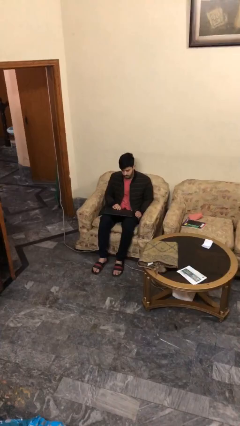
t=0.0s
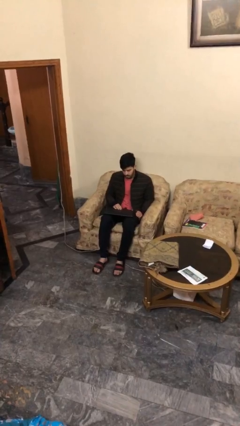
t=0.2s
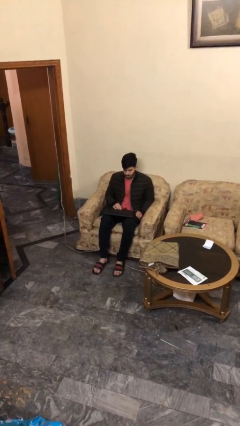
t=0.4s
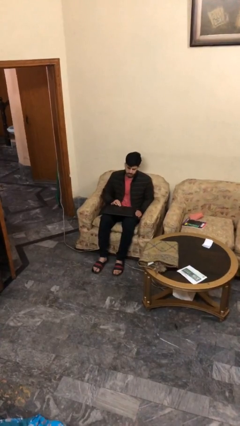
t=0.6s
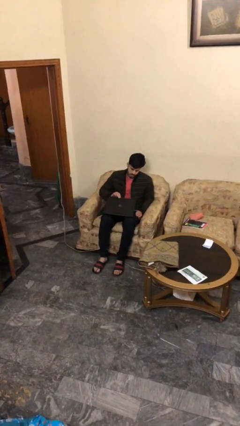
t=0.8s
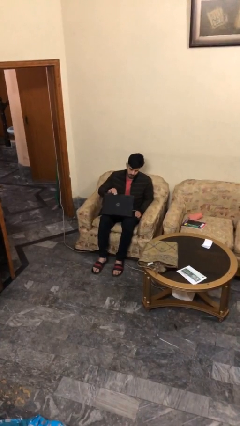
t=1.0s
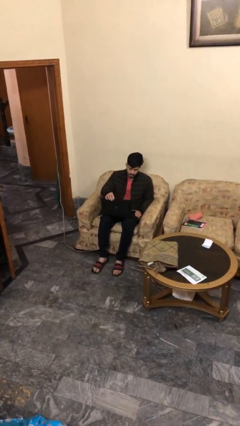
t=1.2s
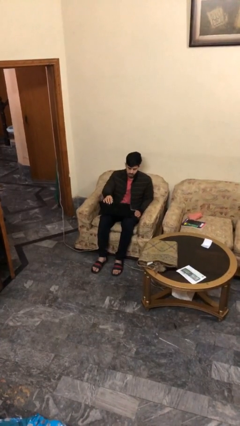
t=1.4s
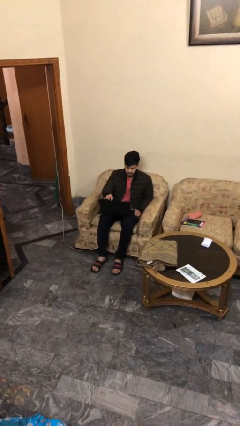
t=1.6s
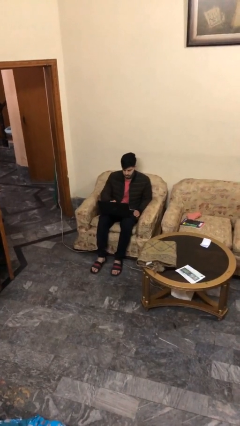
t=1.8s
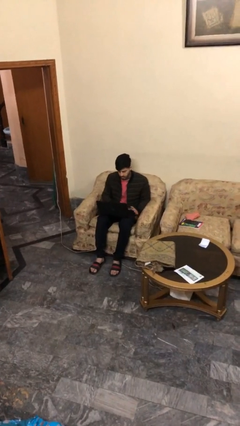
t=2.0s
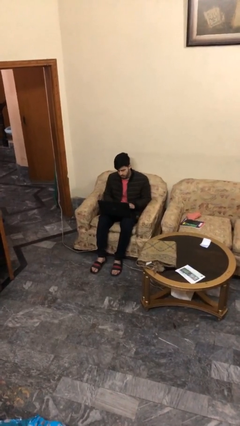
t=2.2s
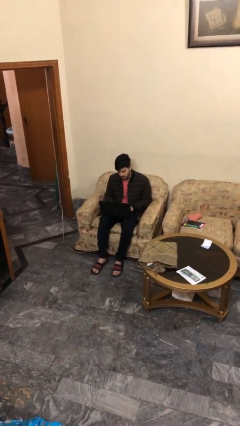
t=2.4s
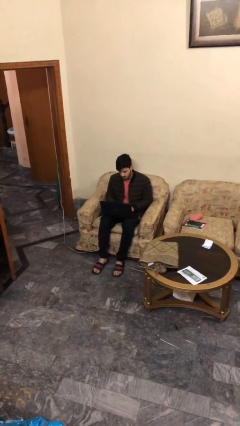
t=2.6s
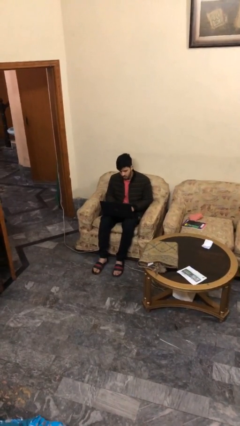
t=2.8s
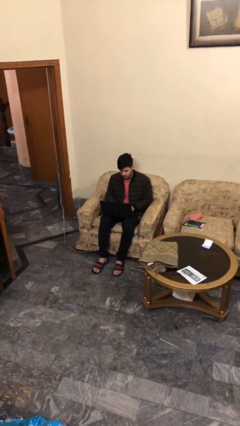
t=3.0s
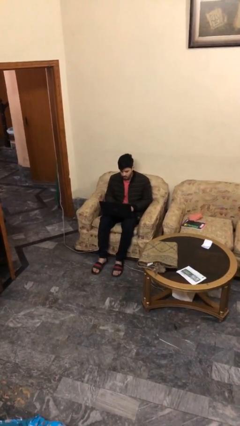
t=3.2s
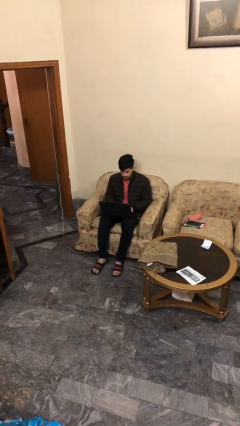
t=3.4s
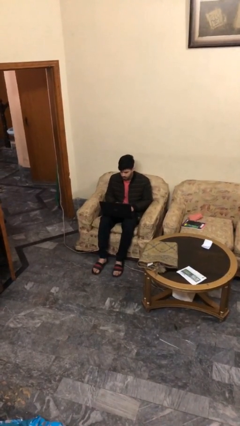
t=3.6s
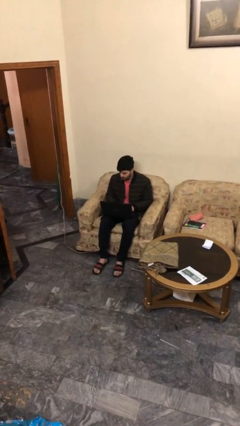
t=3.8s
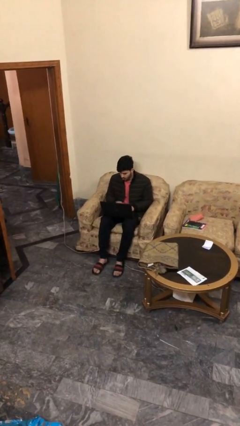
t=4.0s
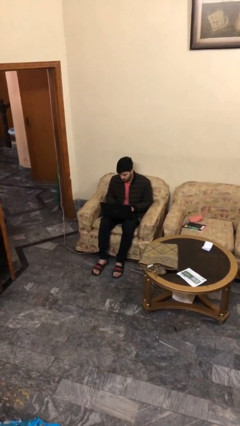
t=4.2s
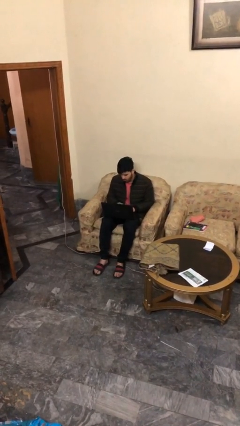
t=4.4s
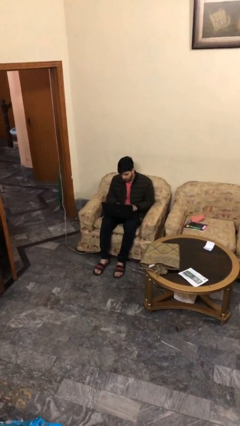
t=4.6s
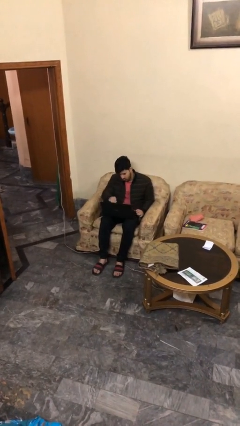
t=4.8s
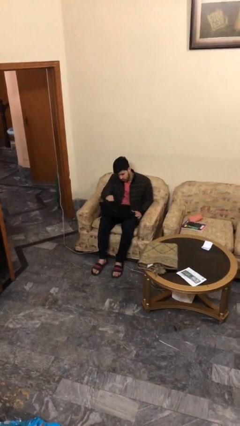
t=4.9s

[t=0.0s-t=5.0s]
person interacts with laptop

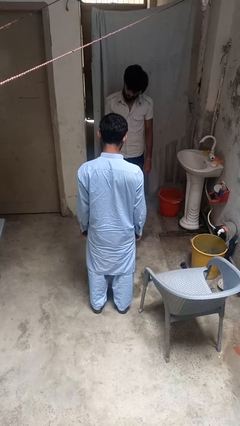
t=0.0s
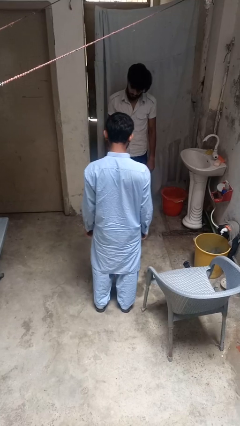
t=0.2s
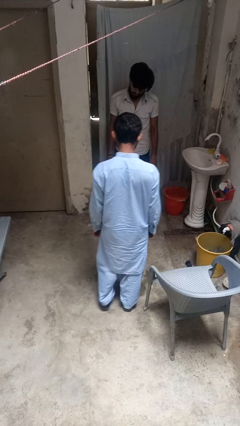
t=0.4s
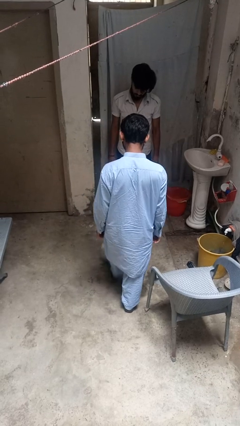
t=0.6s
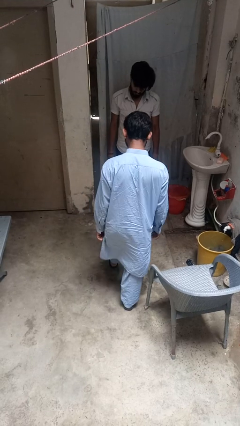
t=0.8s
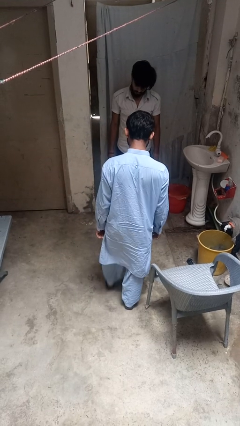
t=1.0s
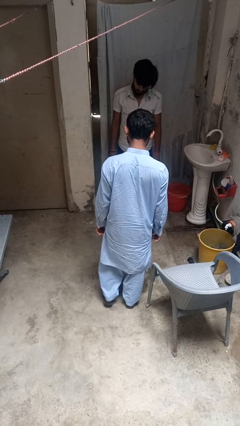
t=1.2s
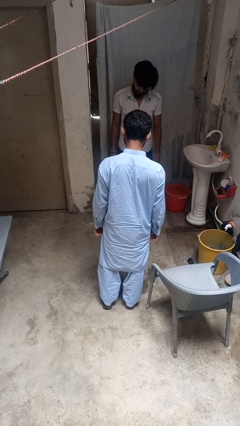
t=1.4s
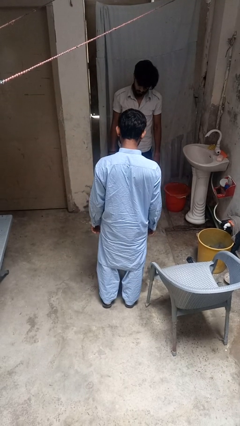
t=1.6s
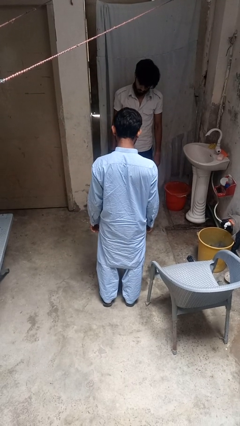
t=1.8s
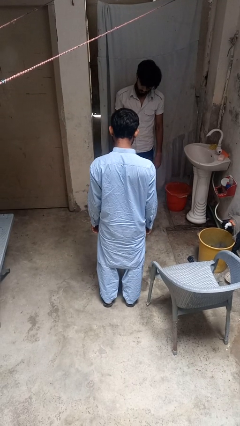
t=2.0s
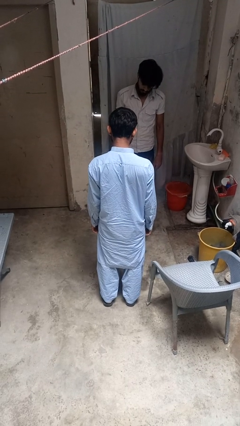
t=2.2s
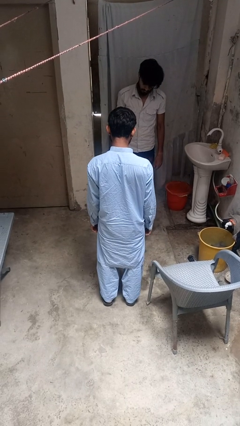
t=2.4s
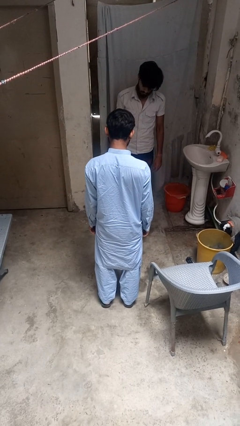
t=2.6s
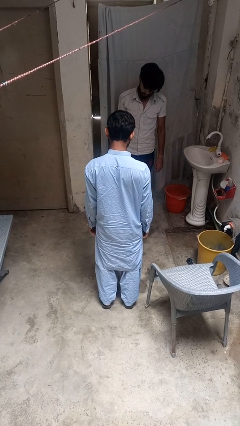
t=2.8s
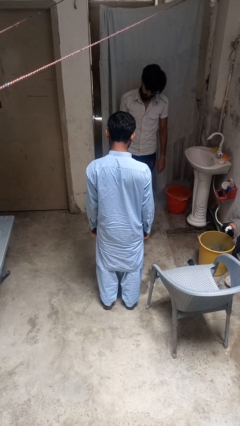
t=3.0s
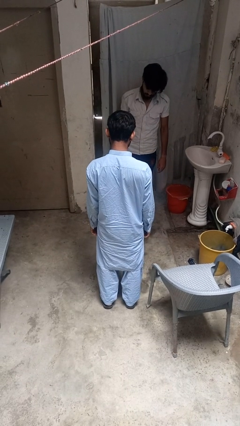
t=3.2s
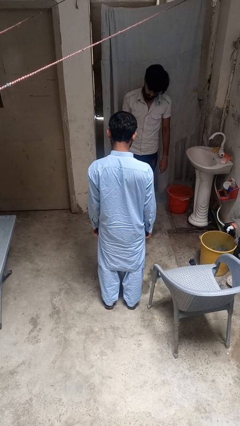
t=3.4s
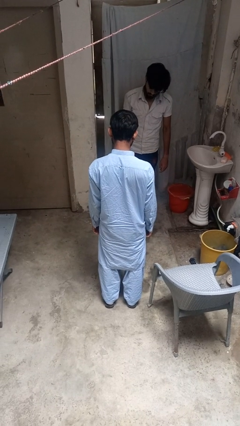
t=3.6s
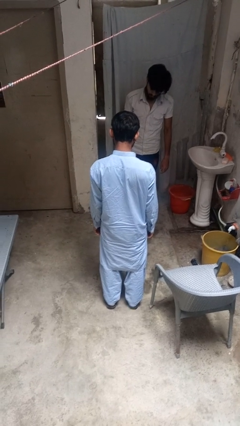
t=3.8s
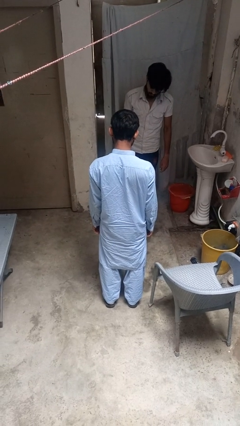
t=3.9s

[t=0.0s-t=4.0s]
person kicks object to person

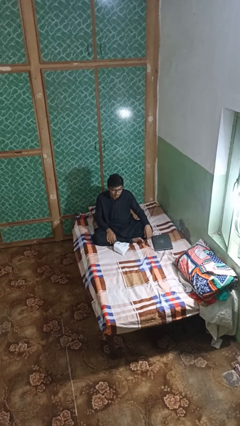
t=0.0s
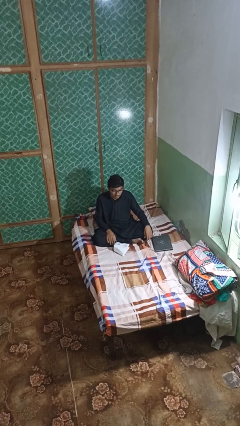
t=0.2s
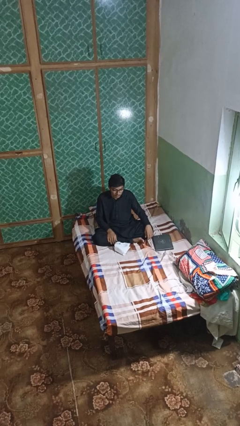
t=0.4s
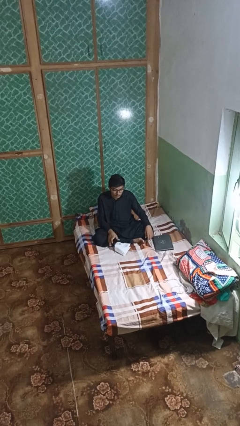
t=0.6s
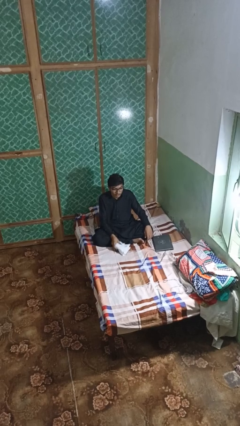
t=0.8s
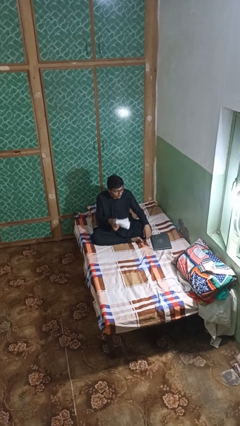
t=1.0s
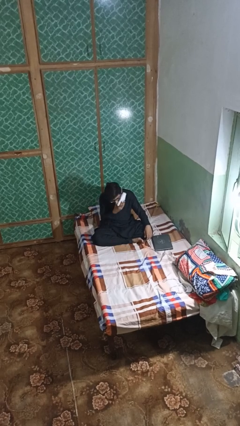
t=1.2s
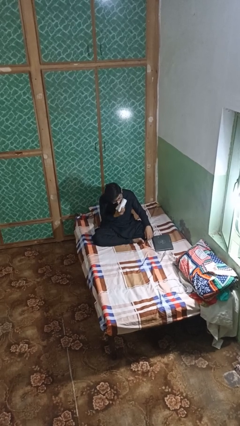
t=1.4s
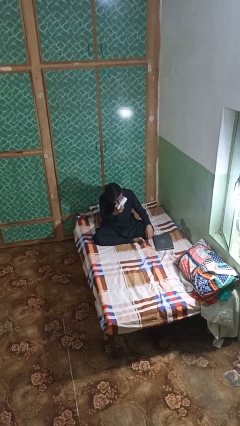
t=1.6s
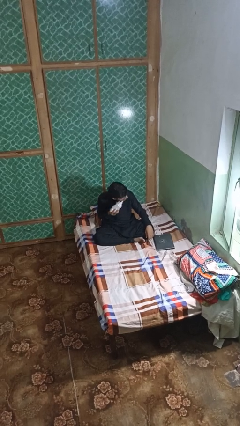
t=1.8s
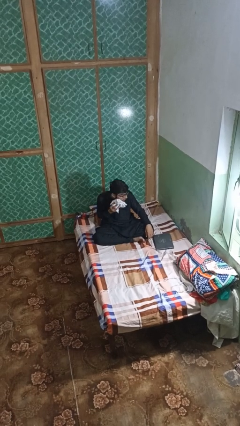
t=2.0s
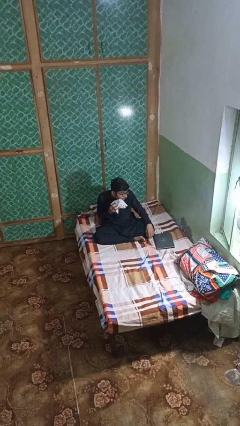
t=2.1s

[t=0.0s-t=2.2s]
person wipes mouth with napkin

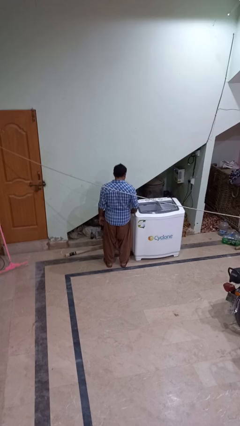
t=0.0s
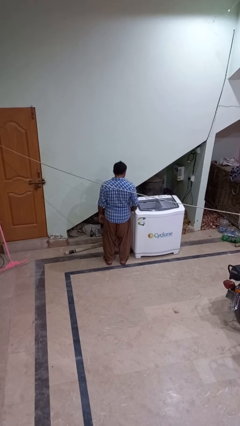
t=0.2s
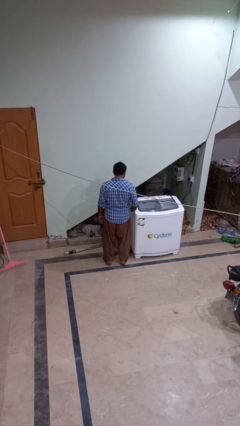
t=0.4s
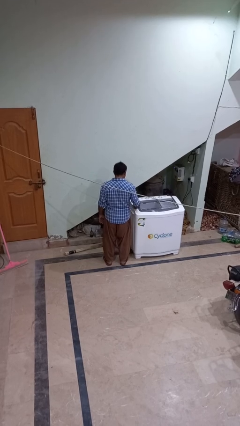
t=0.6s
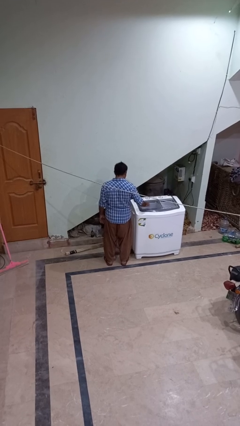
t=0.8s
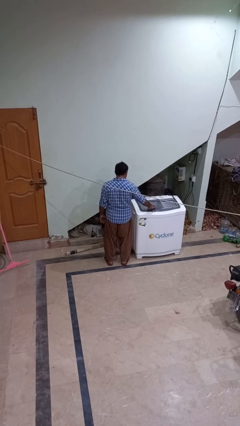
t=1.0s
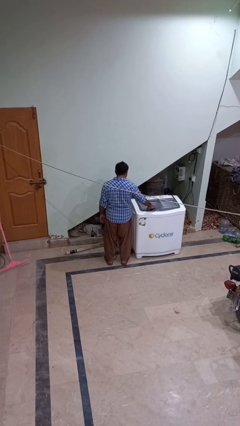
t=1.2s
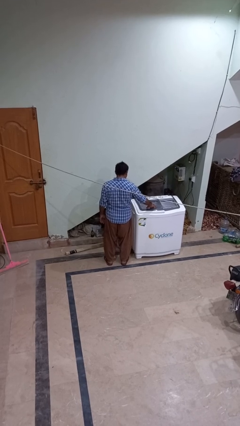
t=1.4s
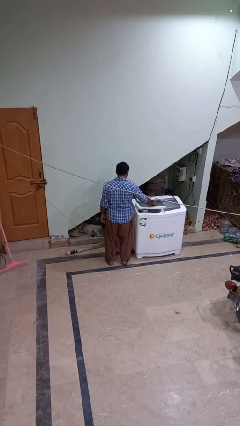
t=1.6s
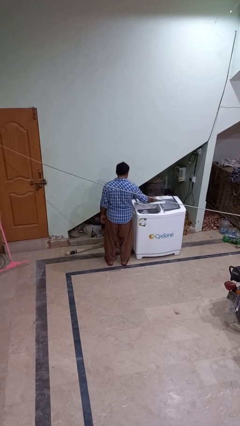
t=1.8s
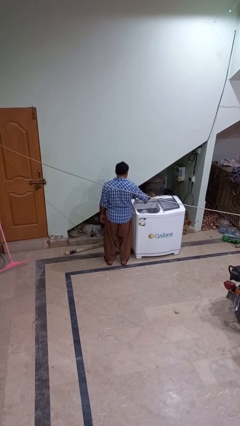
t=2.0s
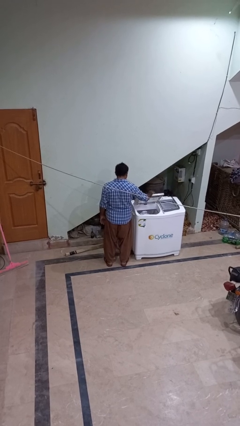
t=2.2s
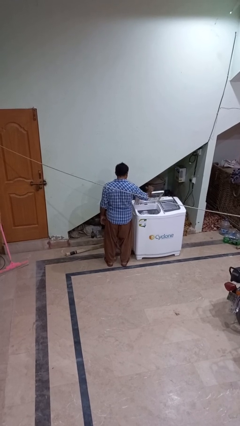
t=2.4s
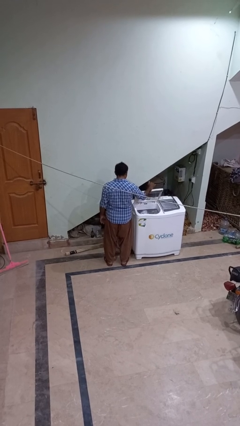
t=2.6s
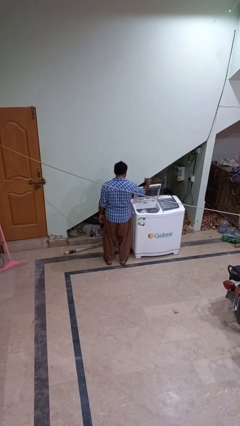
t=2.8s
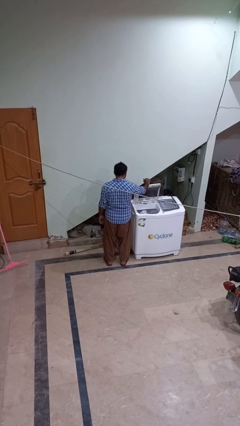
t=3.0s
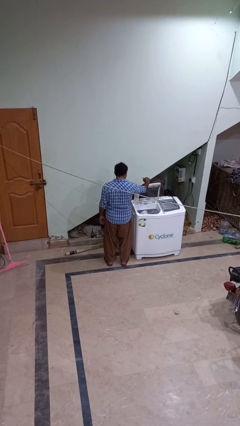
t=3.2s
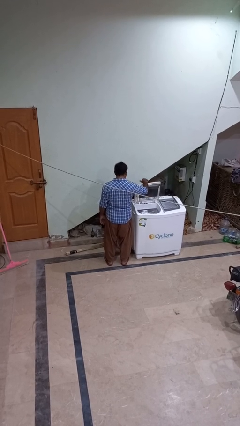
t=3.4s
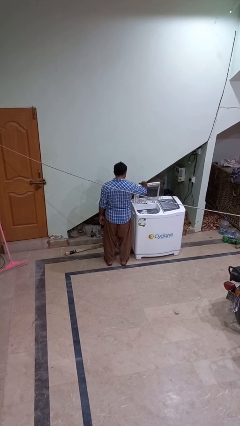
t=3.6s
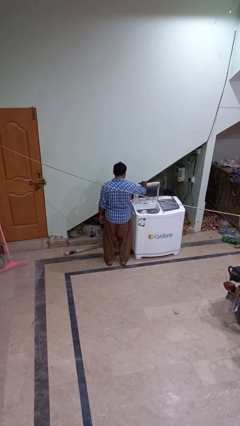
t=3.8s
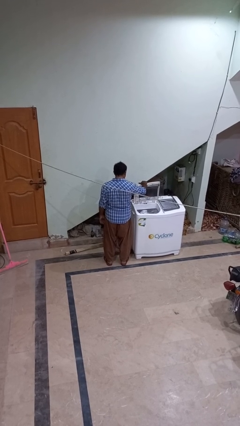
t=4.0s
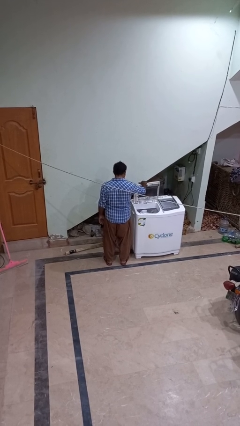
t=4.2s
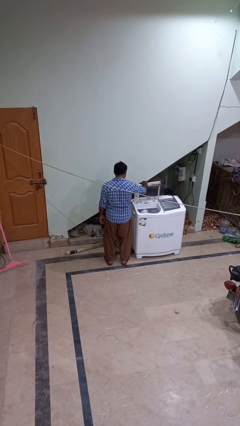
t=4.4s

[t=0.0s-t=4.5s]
person opens clothes washer

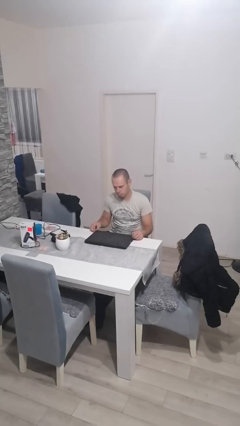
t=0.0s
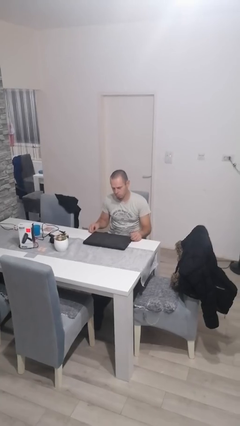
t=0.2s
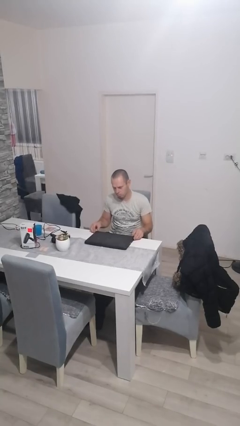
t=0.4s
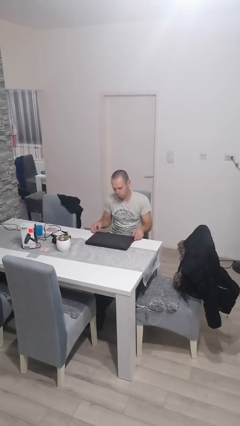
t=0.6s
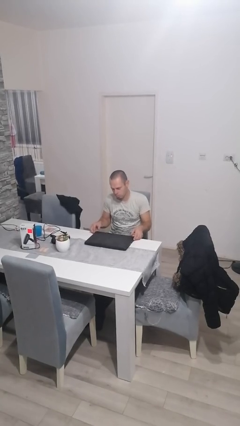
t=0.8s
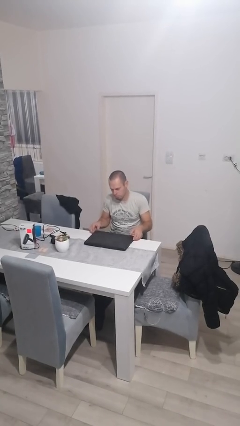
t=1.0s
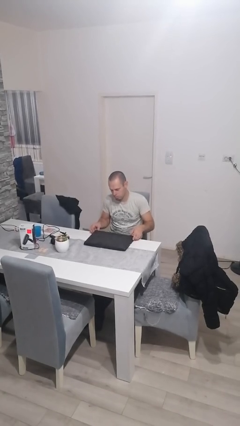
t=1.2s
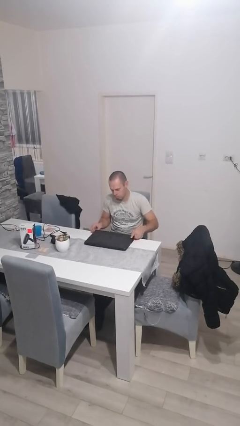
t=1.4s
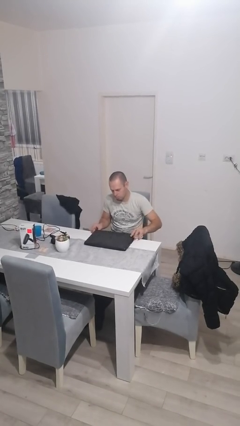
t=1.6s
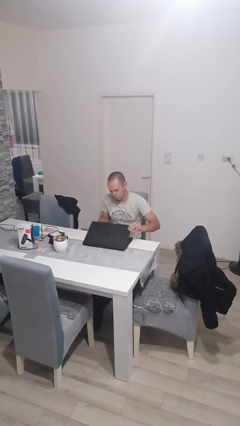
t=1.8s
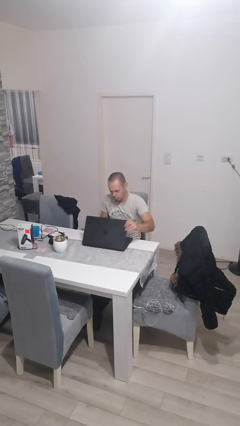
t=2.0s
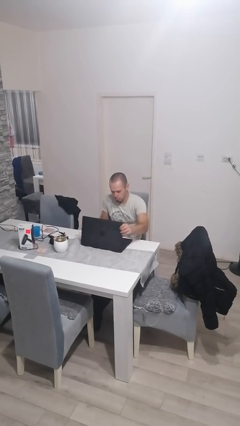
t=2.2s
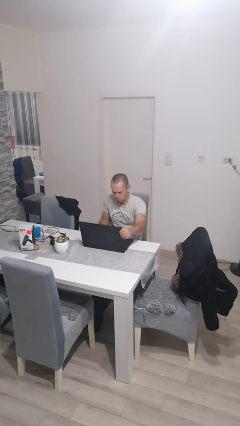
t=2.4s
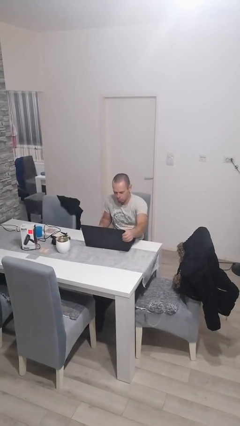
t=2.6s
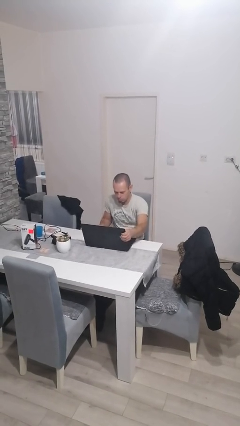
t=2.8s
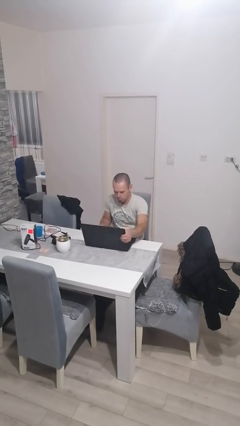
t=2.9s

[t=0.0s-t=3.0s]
person opens laptop
